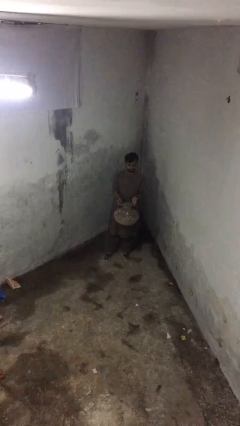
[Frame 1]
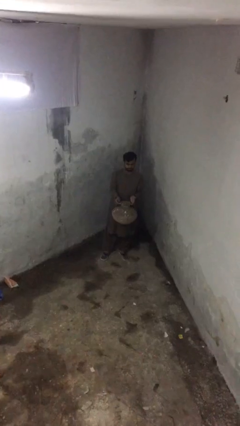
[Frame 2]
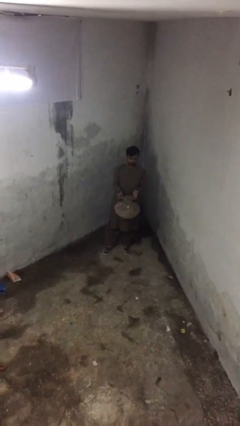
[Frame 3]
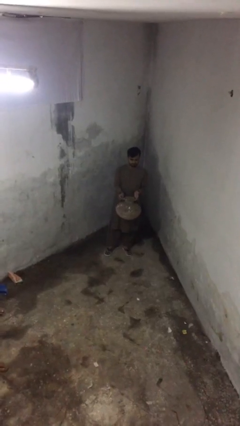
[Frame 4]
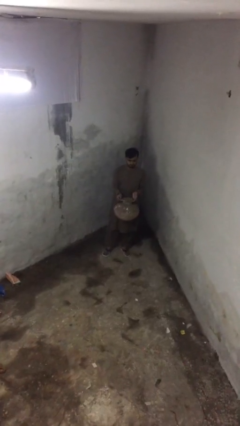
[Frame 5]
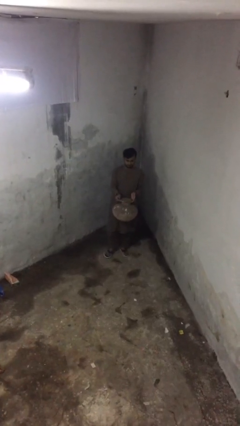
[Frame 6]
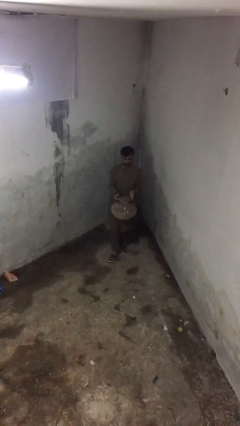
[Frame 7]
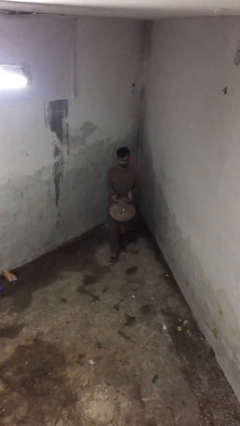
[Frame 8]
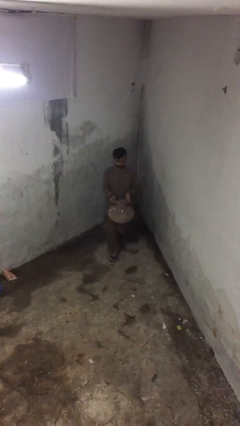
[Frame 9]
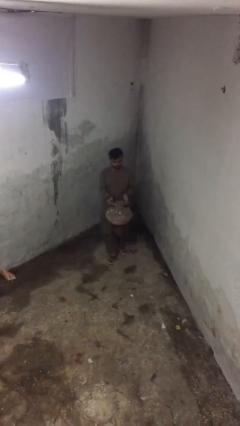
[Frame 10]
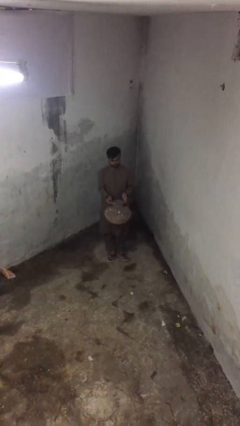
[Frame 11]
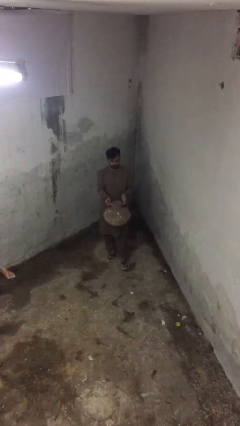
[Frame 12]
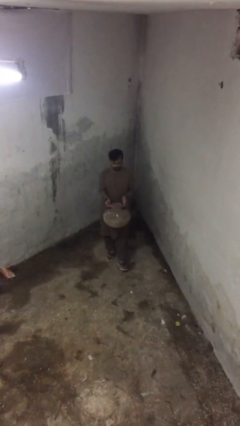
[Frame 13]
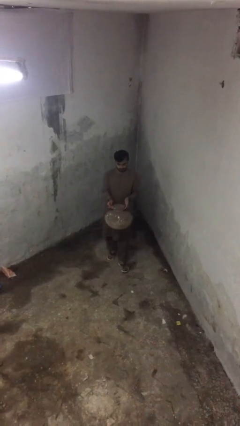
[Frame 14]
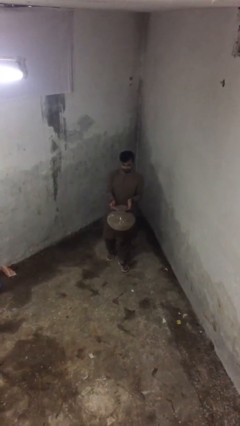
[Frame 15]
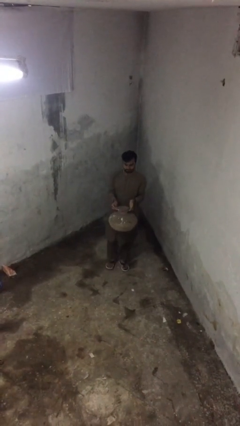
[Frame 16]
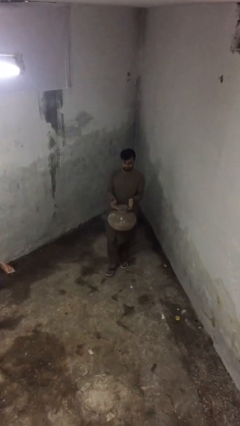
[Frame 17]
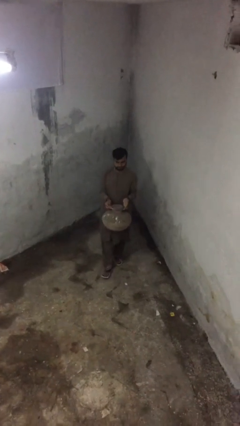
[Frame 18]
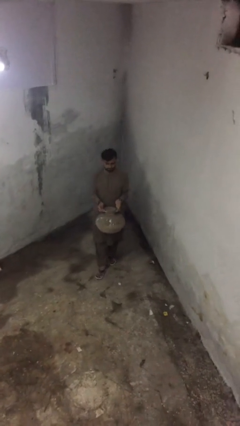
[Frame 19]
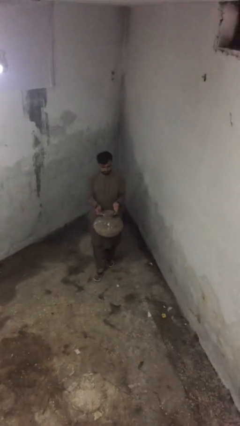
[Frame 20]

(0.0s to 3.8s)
person carries heavy object

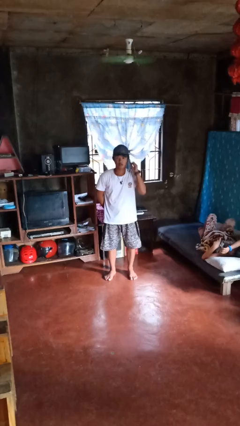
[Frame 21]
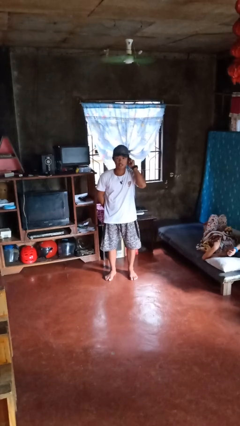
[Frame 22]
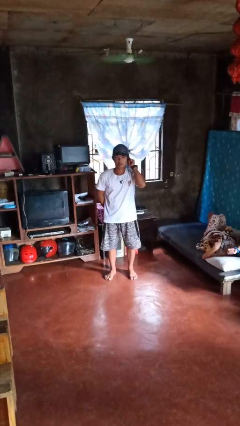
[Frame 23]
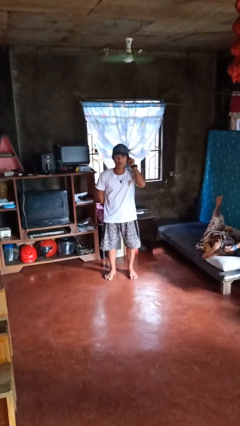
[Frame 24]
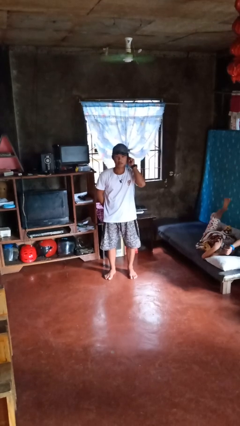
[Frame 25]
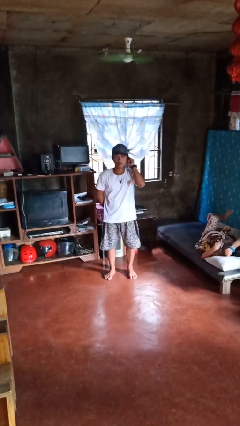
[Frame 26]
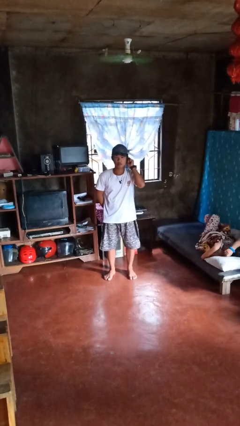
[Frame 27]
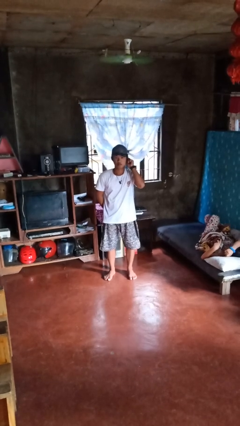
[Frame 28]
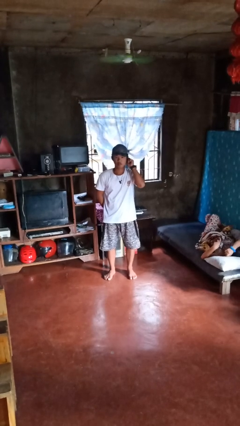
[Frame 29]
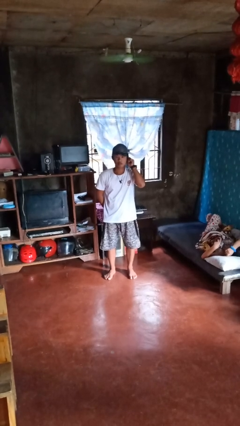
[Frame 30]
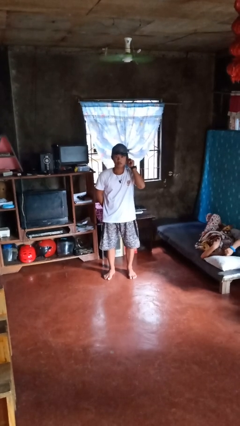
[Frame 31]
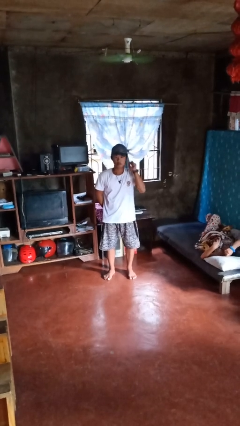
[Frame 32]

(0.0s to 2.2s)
person touches earlobe

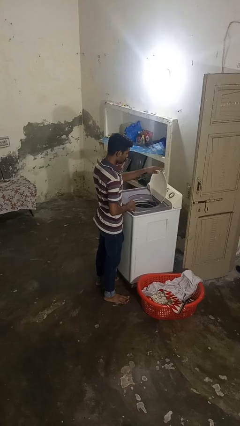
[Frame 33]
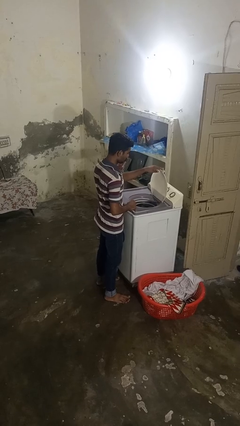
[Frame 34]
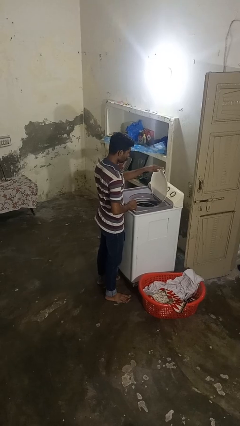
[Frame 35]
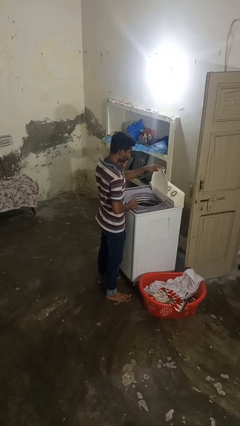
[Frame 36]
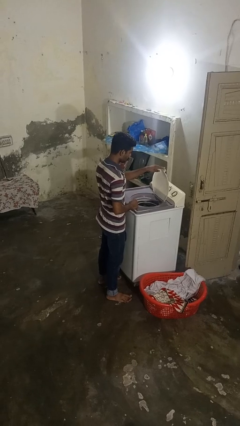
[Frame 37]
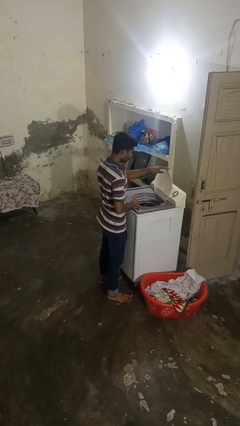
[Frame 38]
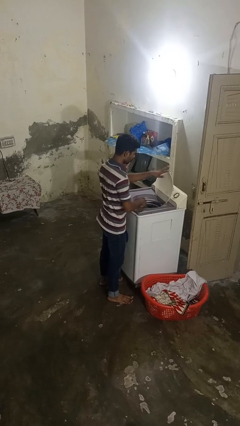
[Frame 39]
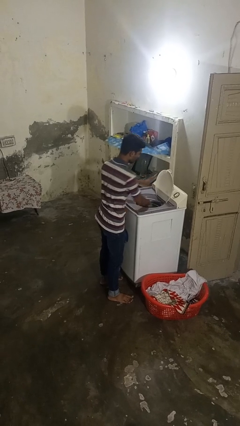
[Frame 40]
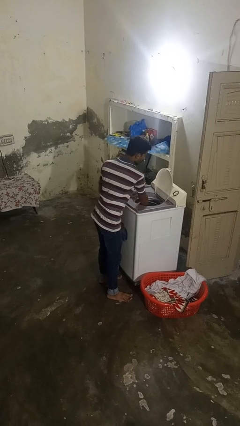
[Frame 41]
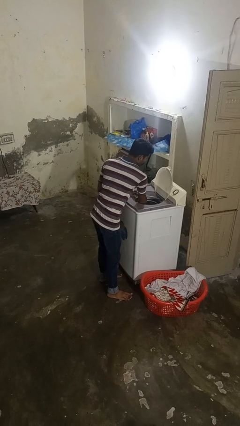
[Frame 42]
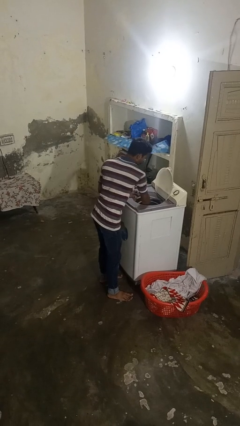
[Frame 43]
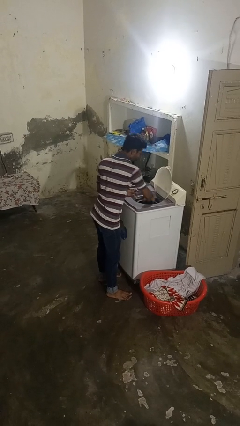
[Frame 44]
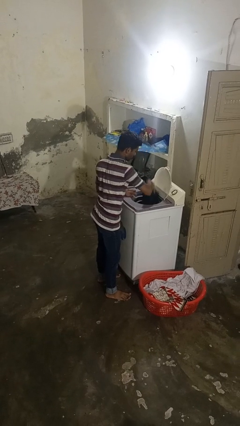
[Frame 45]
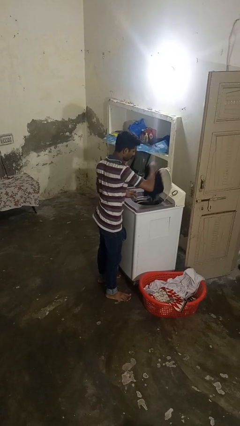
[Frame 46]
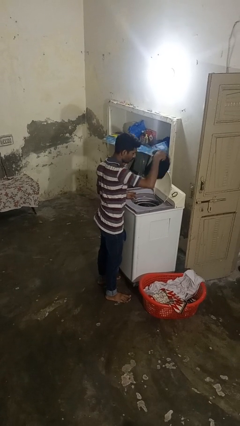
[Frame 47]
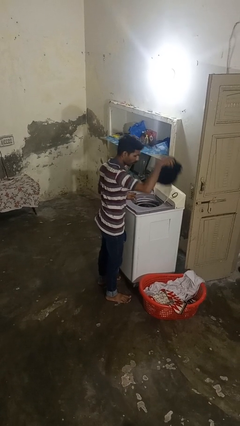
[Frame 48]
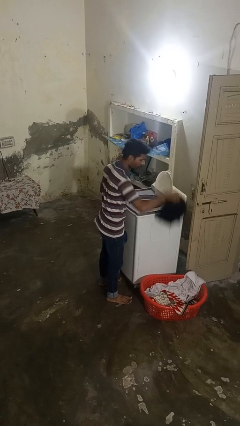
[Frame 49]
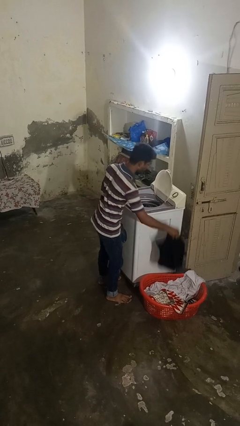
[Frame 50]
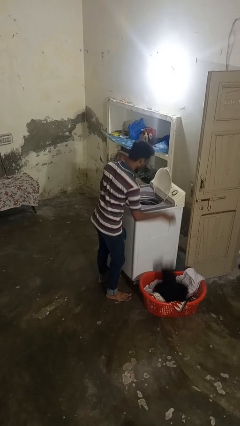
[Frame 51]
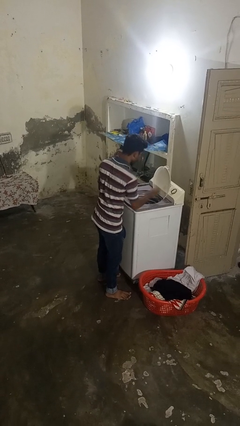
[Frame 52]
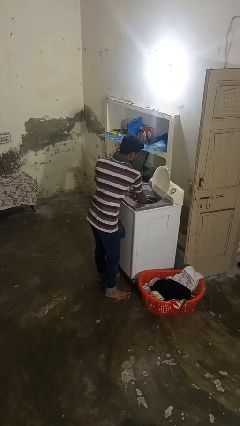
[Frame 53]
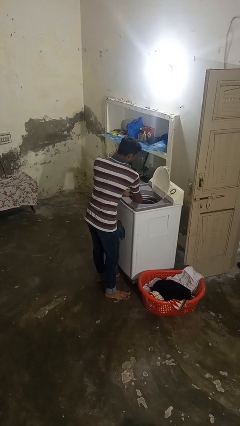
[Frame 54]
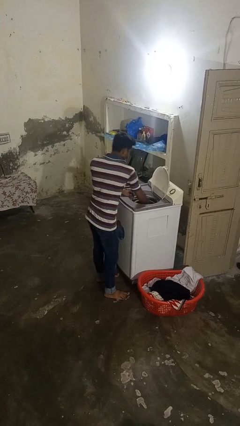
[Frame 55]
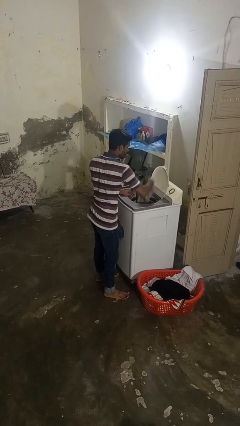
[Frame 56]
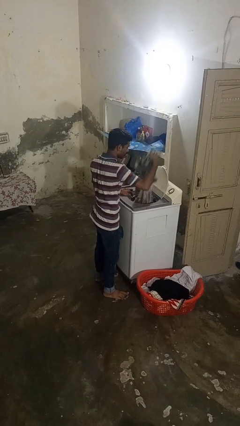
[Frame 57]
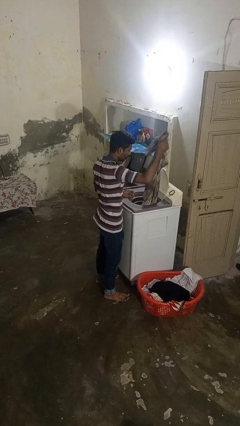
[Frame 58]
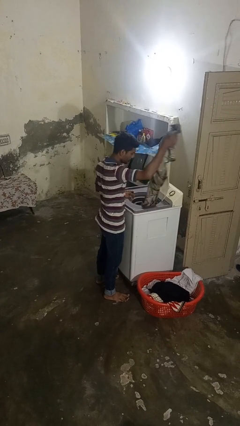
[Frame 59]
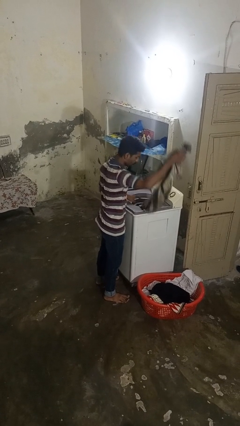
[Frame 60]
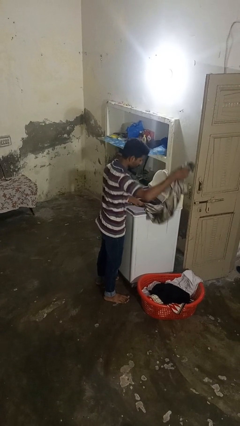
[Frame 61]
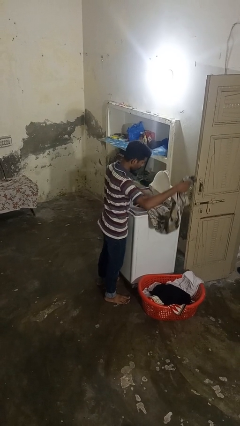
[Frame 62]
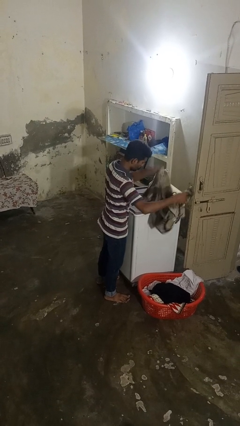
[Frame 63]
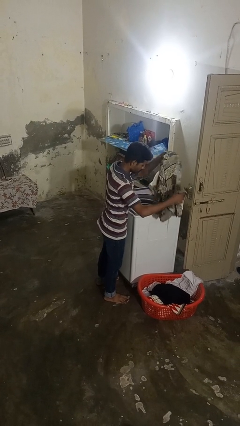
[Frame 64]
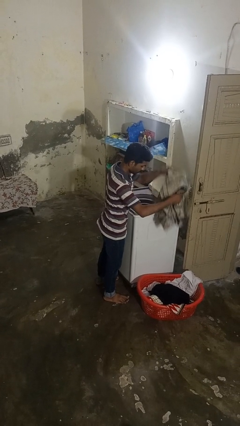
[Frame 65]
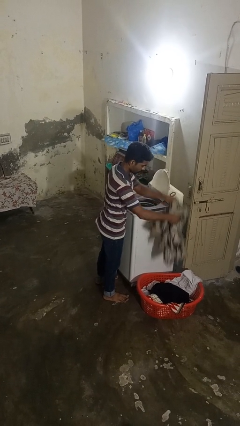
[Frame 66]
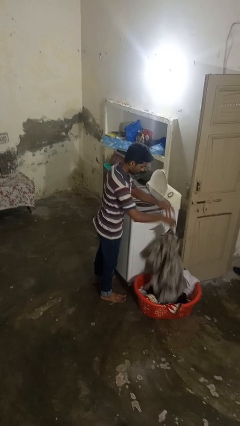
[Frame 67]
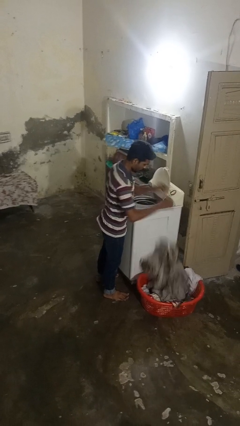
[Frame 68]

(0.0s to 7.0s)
person unloads dryer

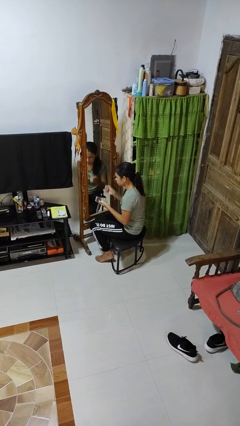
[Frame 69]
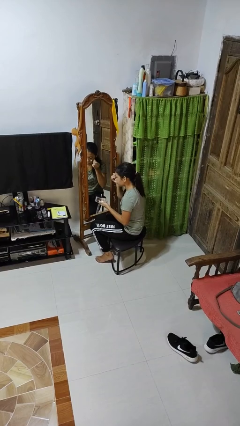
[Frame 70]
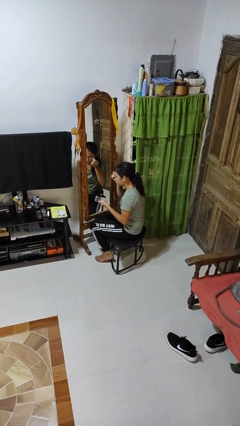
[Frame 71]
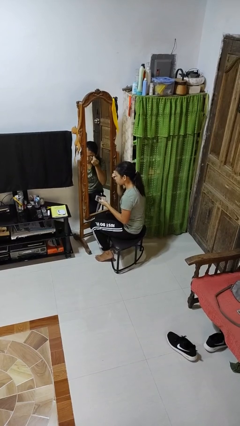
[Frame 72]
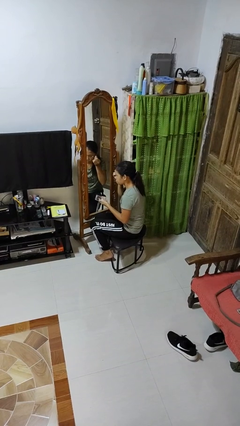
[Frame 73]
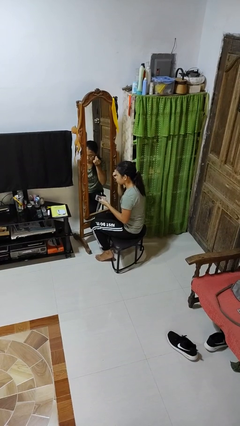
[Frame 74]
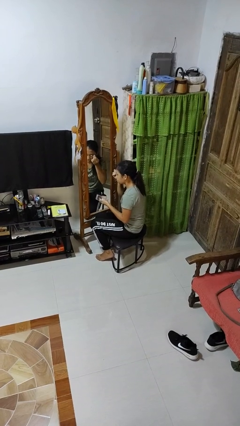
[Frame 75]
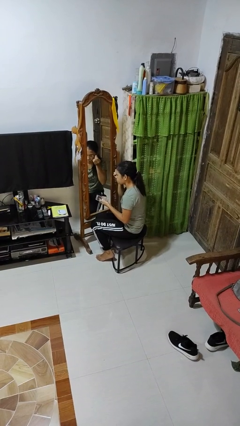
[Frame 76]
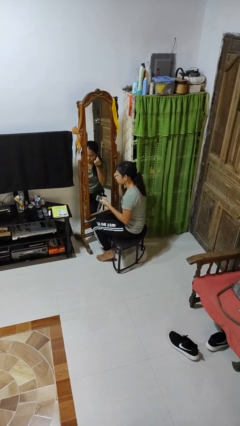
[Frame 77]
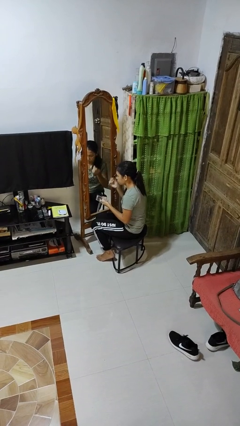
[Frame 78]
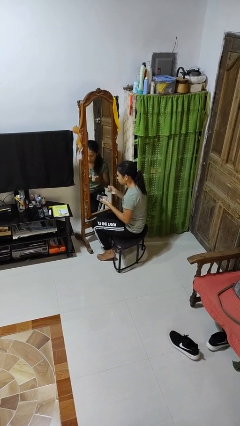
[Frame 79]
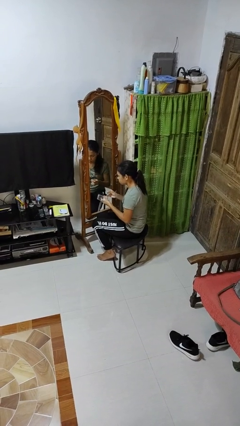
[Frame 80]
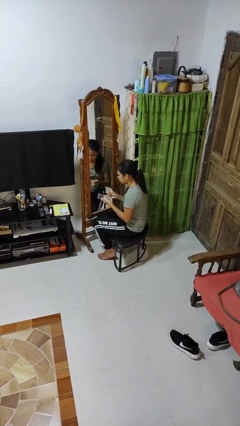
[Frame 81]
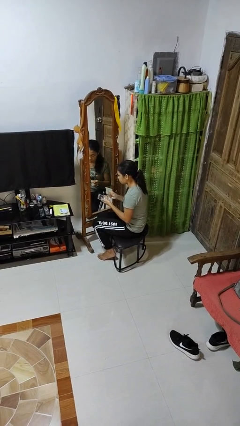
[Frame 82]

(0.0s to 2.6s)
person applies eye makeup

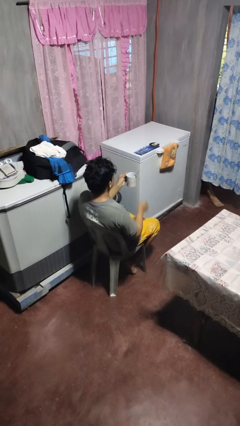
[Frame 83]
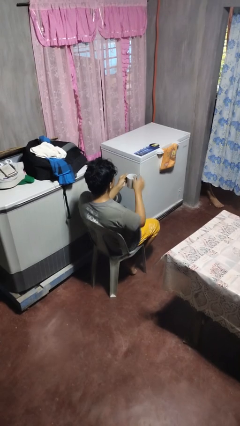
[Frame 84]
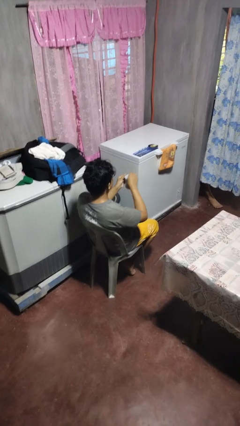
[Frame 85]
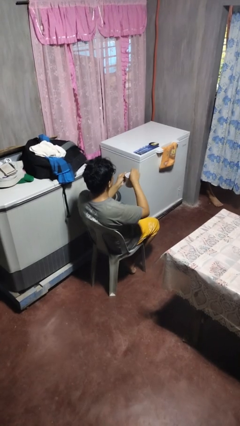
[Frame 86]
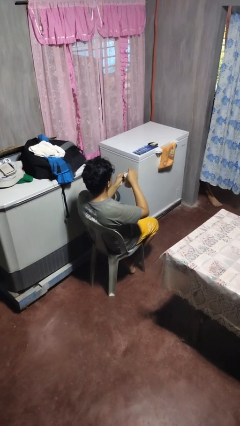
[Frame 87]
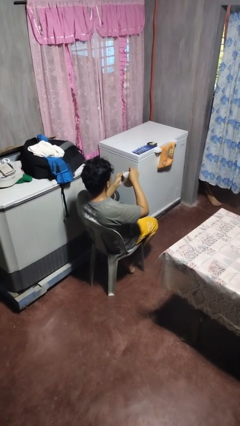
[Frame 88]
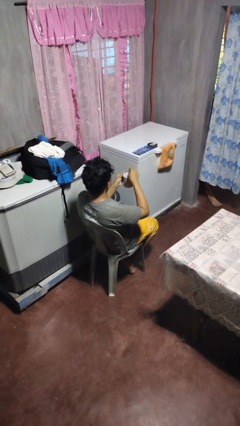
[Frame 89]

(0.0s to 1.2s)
person stirs mug

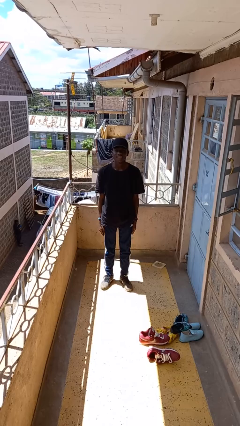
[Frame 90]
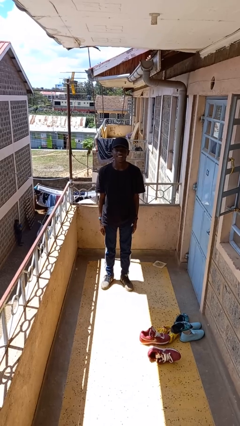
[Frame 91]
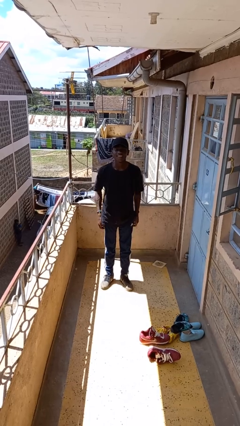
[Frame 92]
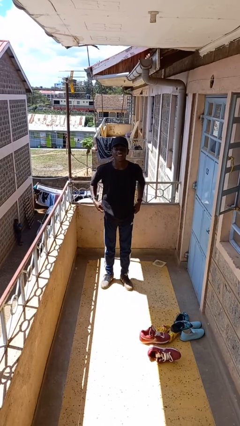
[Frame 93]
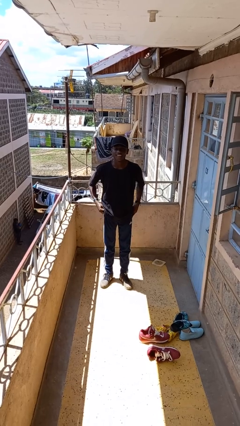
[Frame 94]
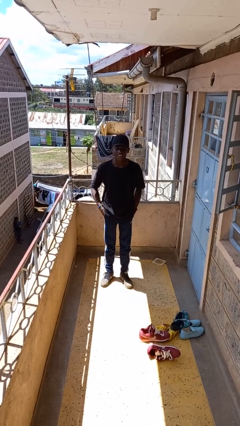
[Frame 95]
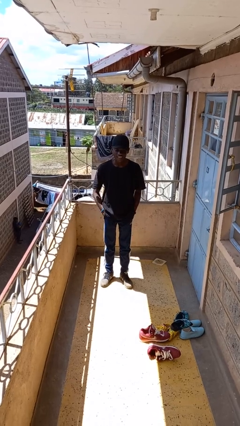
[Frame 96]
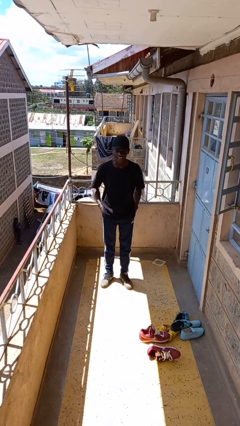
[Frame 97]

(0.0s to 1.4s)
person puts hands in back pockets
